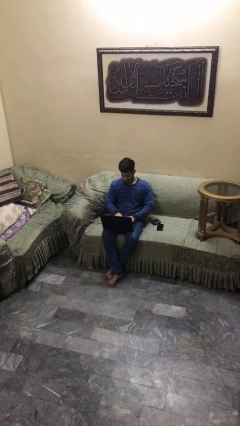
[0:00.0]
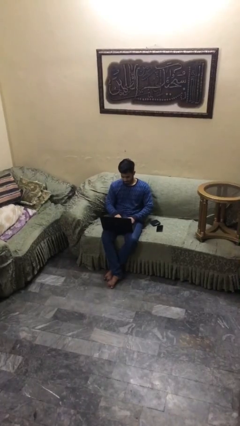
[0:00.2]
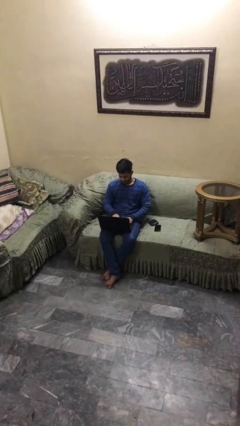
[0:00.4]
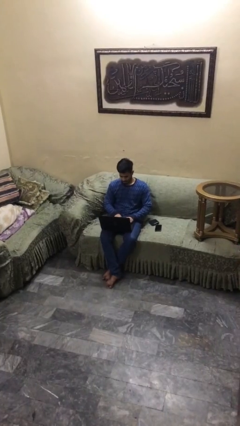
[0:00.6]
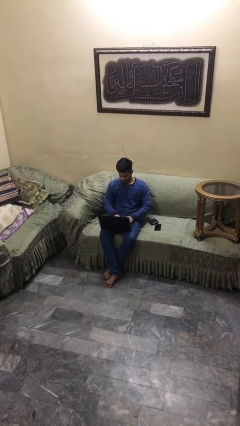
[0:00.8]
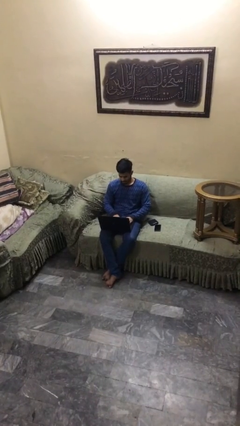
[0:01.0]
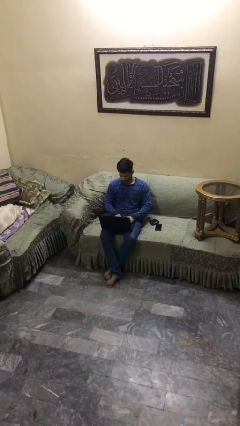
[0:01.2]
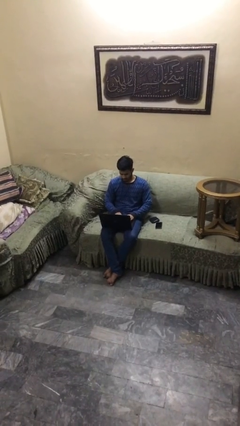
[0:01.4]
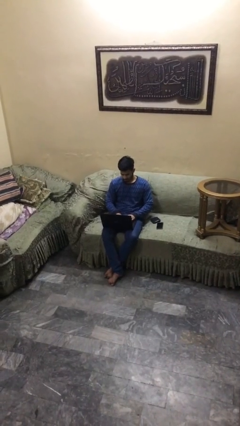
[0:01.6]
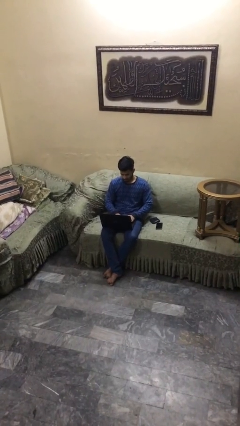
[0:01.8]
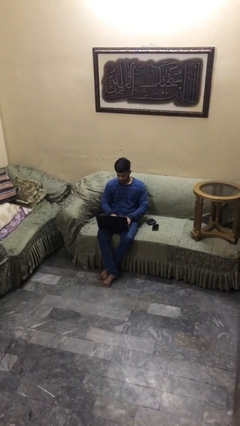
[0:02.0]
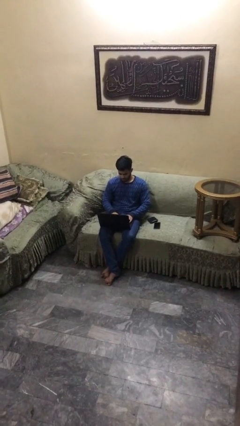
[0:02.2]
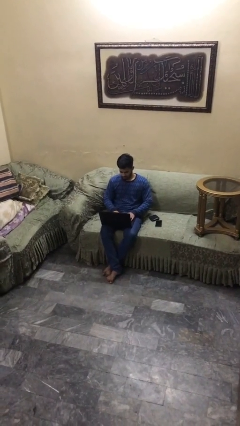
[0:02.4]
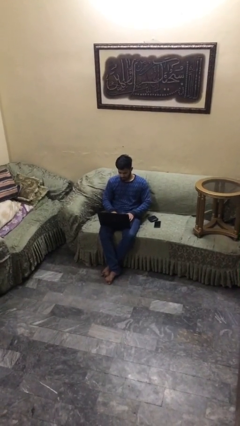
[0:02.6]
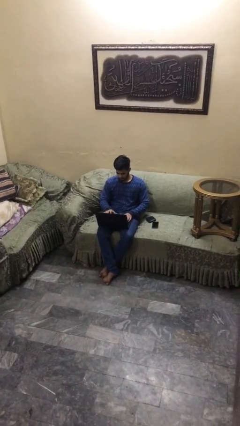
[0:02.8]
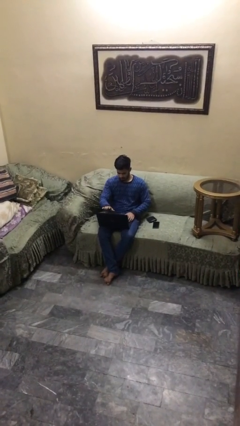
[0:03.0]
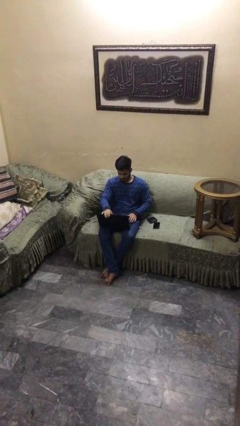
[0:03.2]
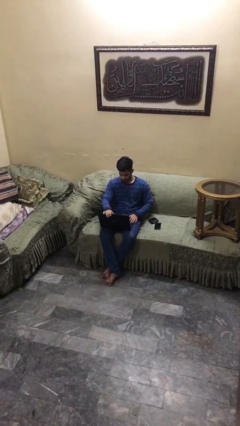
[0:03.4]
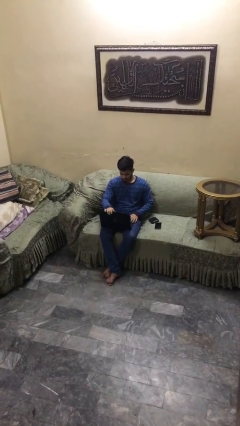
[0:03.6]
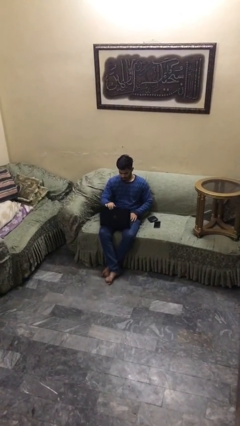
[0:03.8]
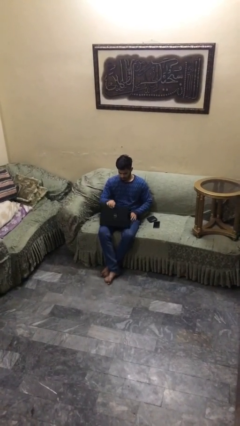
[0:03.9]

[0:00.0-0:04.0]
person interacts with laptop

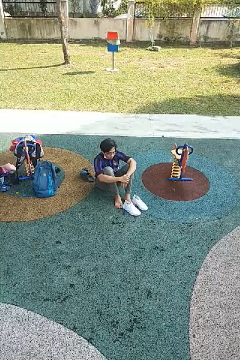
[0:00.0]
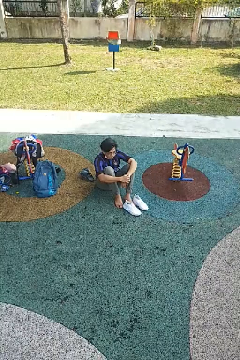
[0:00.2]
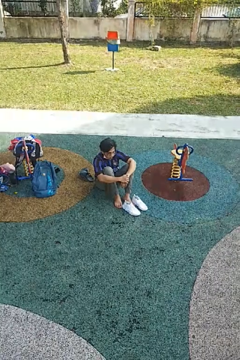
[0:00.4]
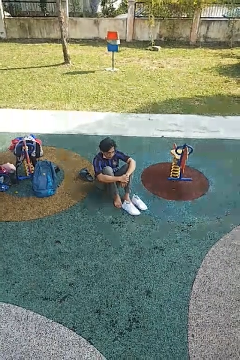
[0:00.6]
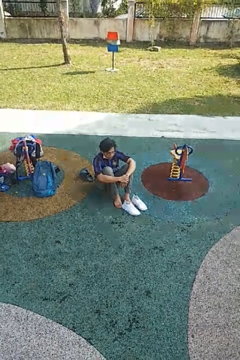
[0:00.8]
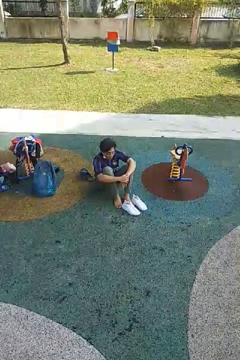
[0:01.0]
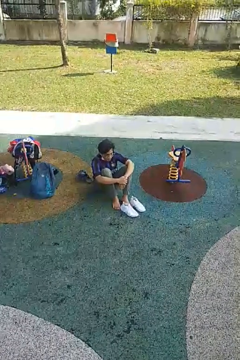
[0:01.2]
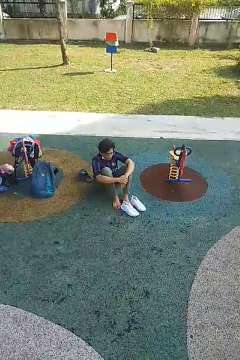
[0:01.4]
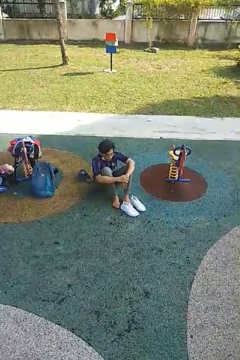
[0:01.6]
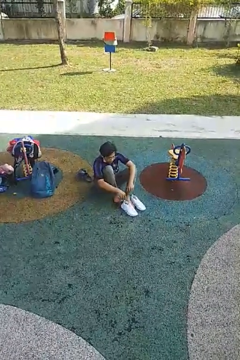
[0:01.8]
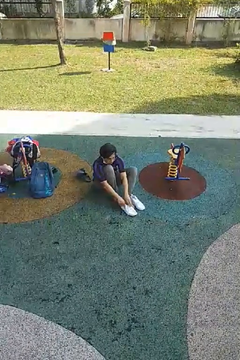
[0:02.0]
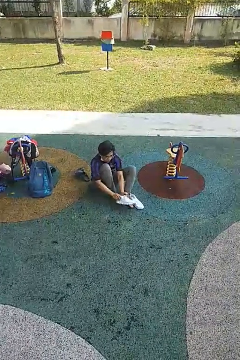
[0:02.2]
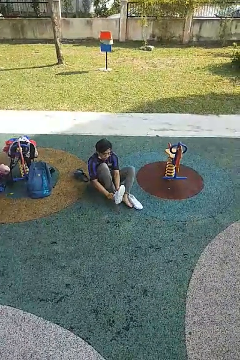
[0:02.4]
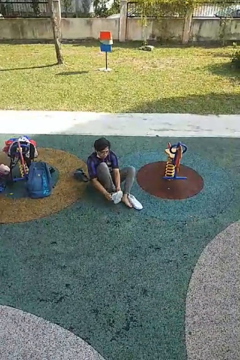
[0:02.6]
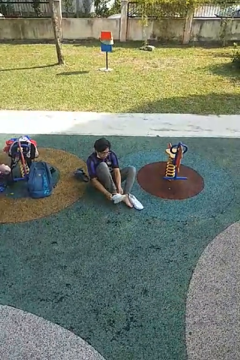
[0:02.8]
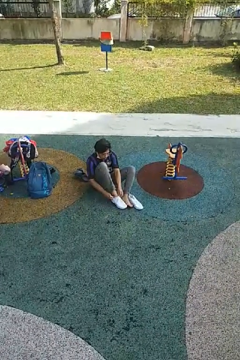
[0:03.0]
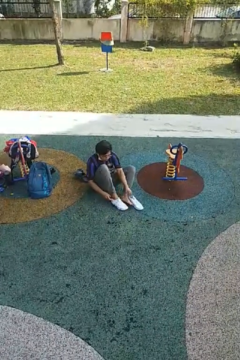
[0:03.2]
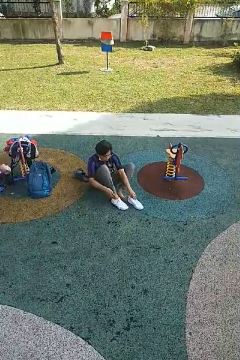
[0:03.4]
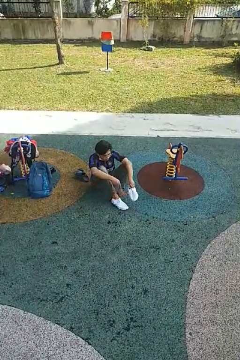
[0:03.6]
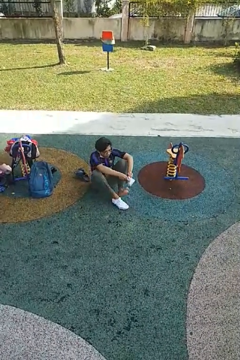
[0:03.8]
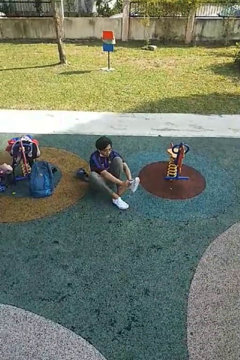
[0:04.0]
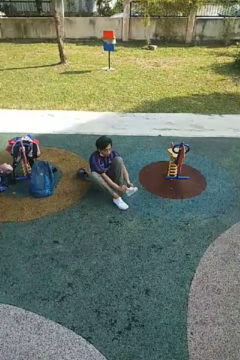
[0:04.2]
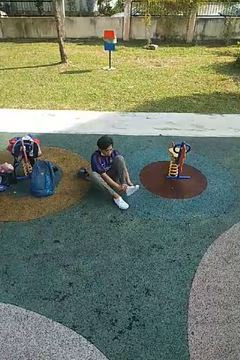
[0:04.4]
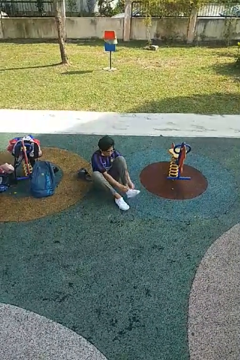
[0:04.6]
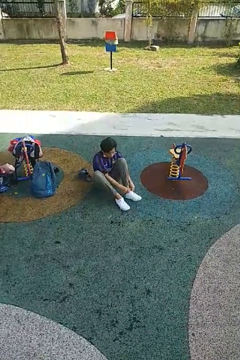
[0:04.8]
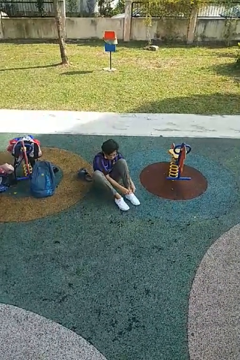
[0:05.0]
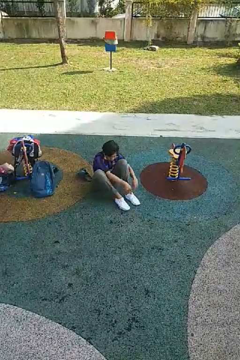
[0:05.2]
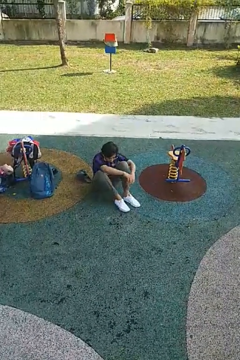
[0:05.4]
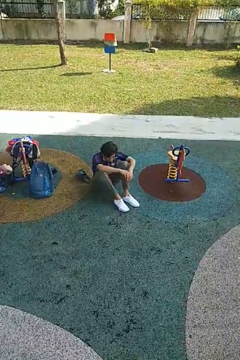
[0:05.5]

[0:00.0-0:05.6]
person puts on shoes

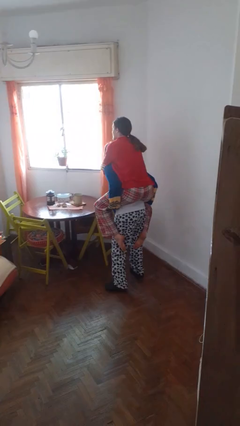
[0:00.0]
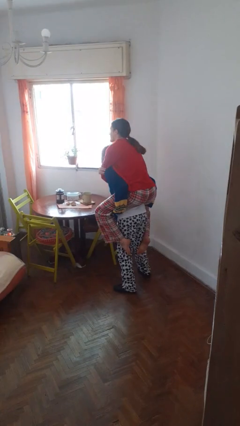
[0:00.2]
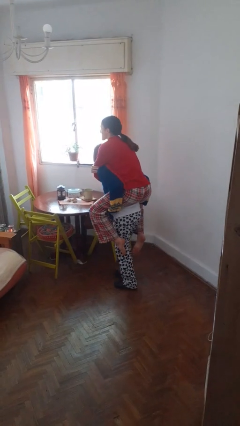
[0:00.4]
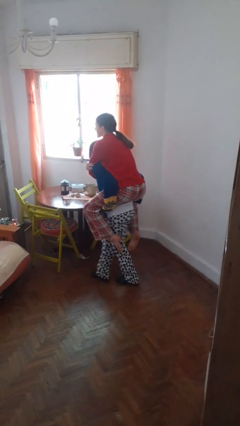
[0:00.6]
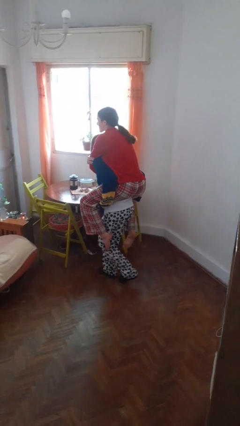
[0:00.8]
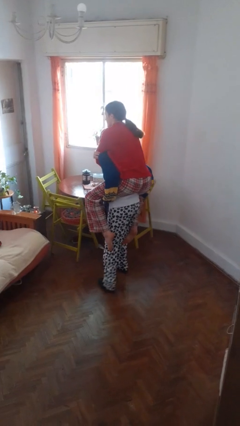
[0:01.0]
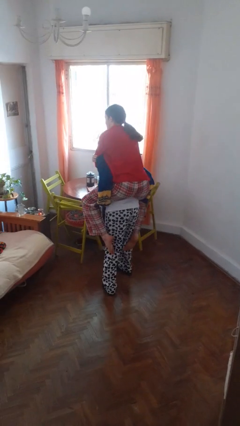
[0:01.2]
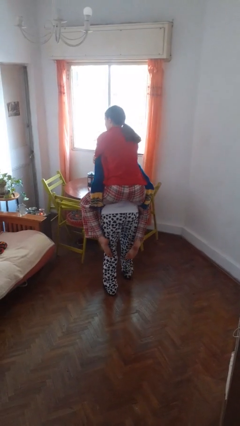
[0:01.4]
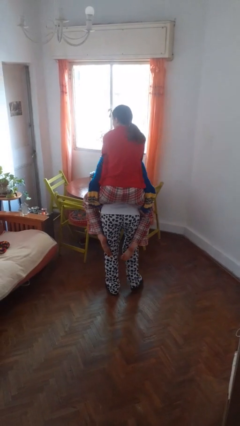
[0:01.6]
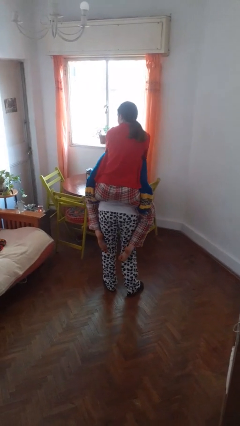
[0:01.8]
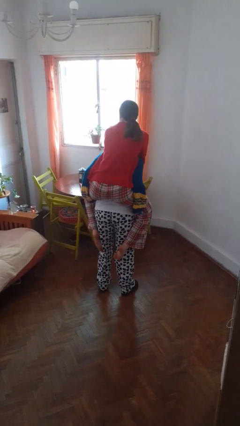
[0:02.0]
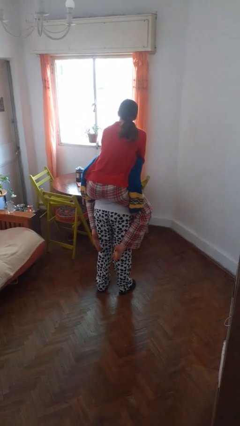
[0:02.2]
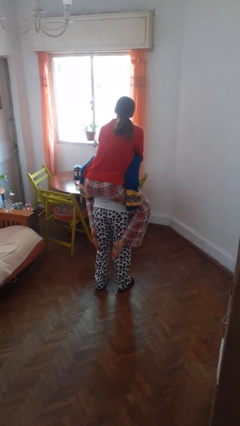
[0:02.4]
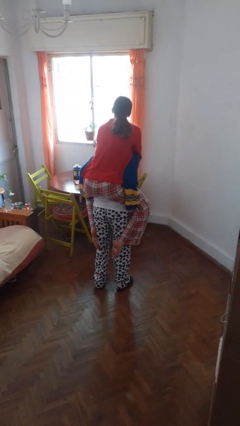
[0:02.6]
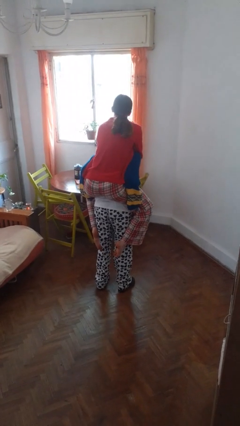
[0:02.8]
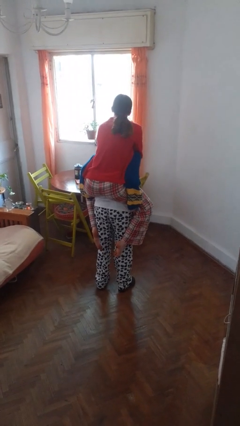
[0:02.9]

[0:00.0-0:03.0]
person carries person on back

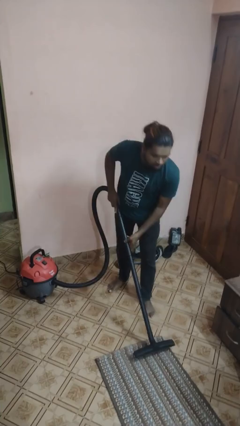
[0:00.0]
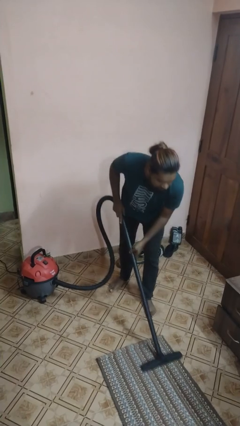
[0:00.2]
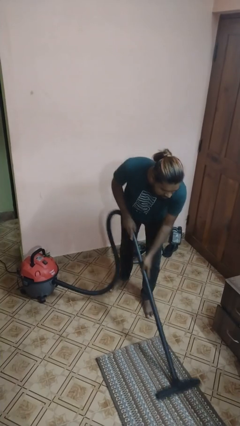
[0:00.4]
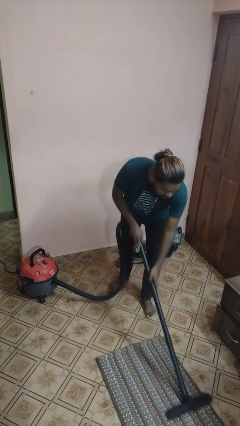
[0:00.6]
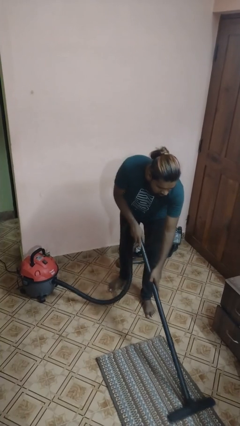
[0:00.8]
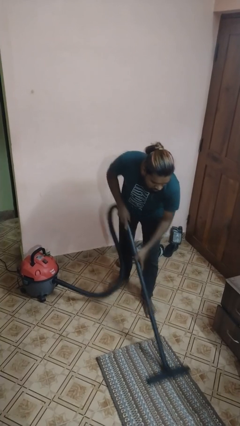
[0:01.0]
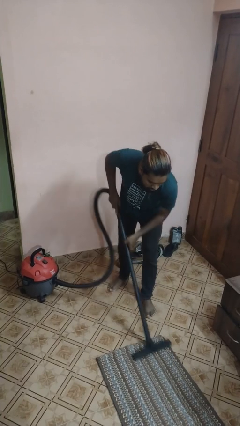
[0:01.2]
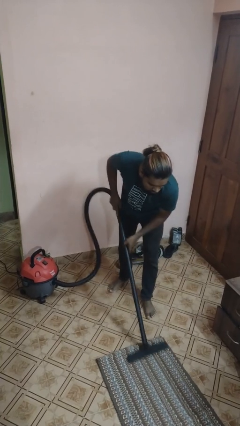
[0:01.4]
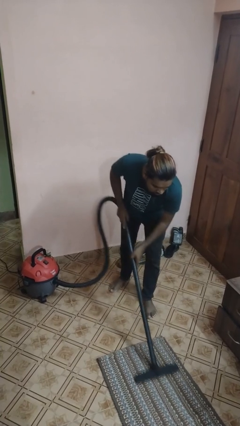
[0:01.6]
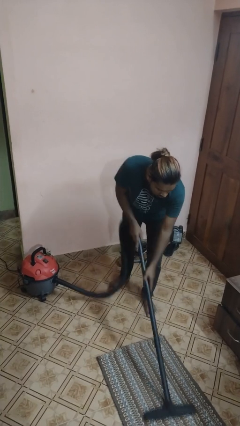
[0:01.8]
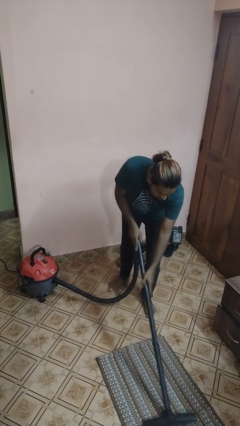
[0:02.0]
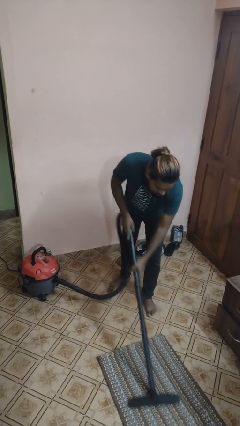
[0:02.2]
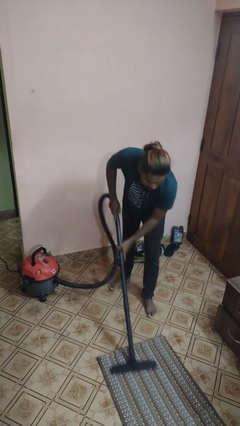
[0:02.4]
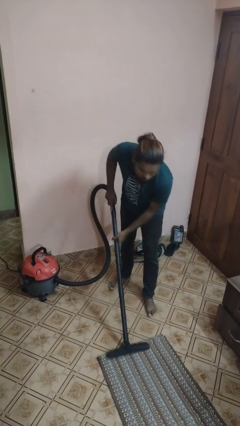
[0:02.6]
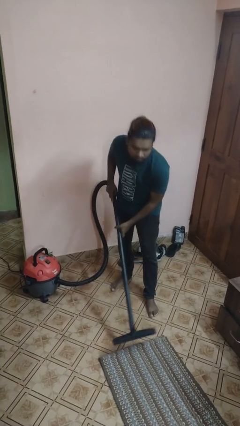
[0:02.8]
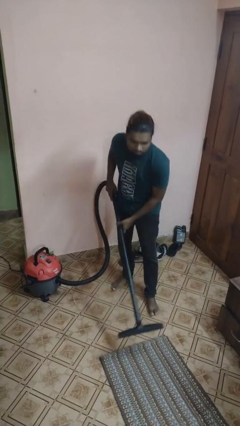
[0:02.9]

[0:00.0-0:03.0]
person vacuums carpet

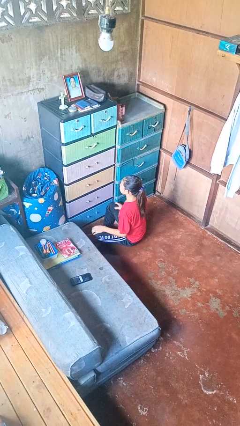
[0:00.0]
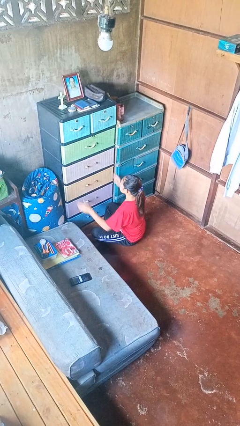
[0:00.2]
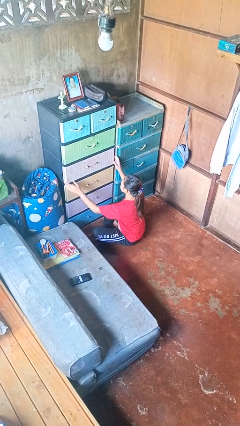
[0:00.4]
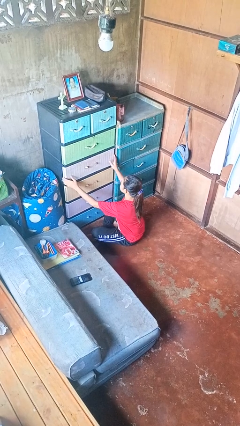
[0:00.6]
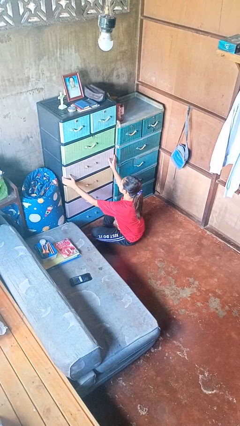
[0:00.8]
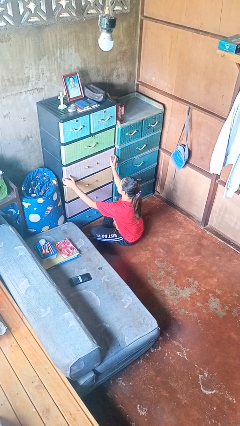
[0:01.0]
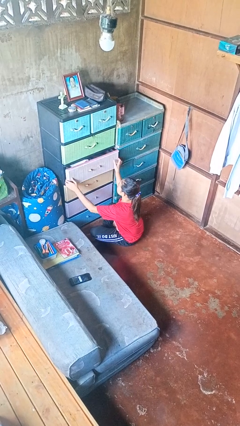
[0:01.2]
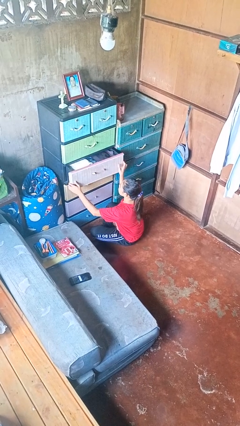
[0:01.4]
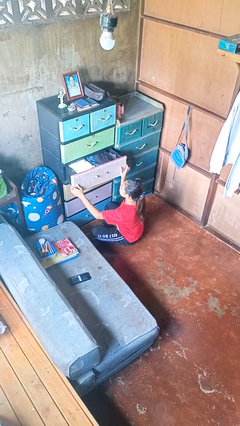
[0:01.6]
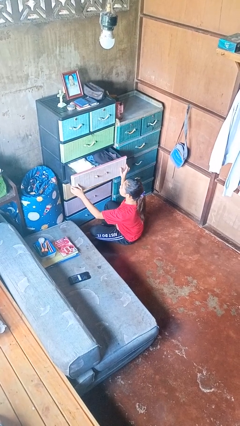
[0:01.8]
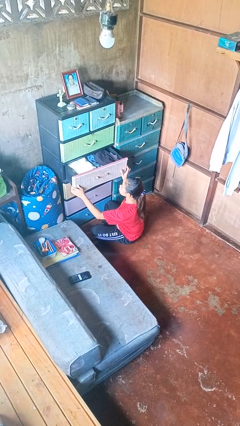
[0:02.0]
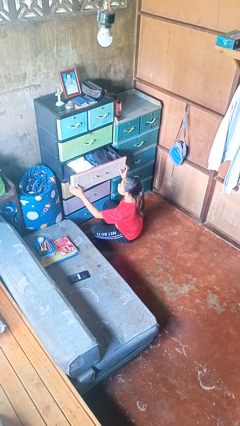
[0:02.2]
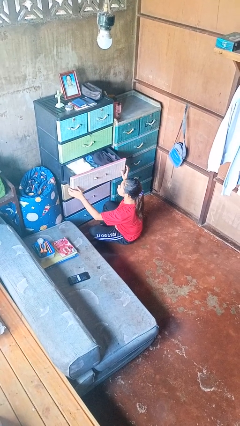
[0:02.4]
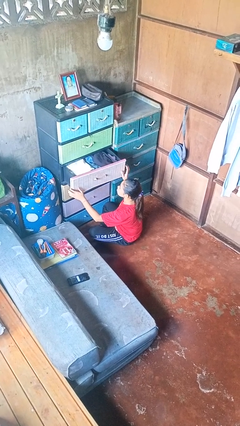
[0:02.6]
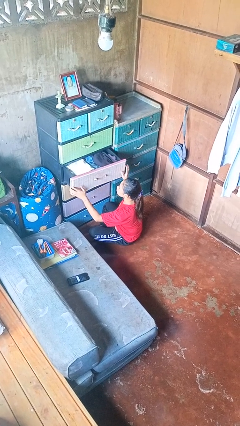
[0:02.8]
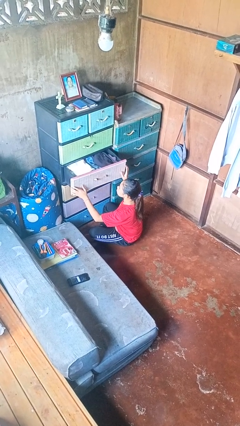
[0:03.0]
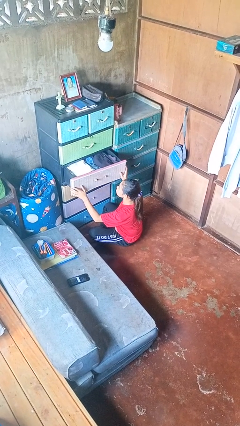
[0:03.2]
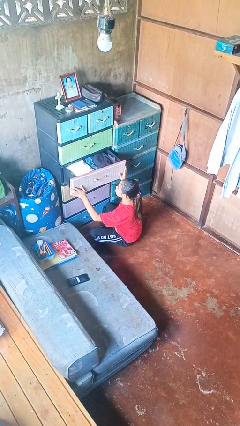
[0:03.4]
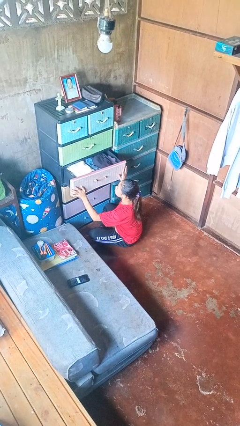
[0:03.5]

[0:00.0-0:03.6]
person opens dresser drawer
